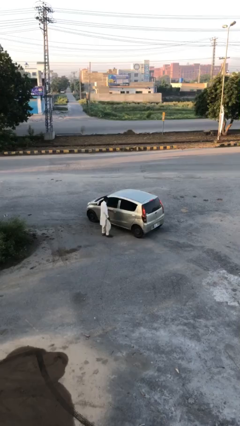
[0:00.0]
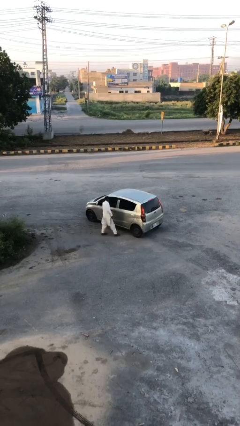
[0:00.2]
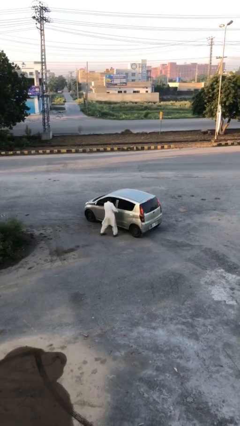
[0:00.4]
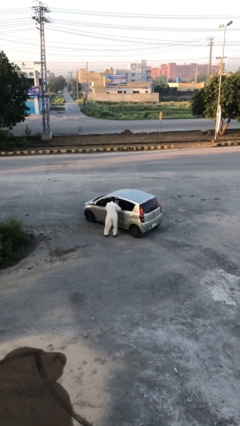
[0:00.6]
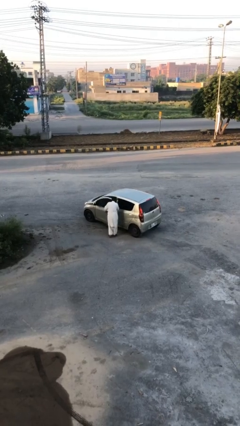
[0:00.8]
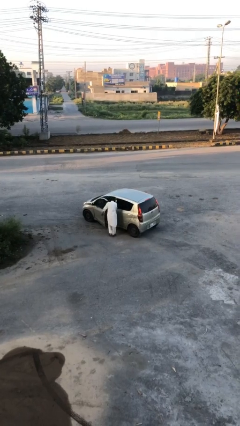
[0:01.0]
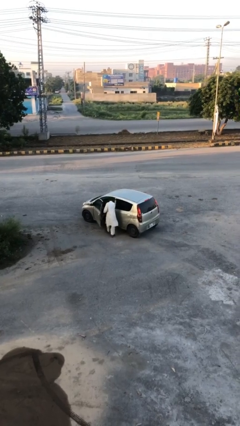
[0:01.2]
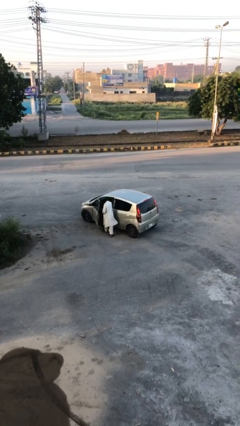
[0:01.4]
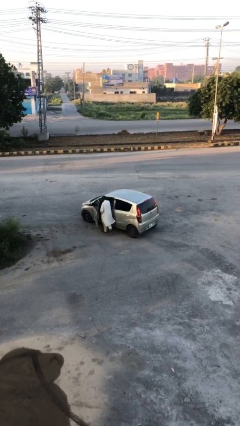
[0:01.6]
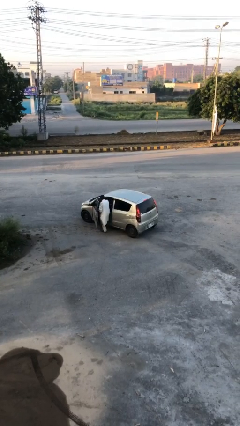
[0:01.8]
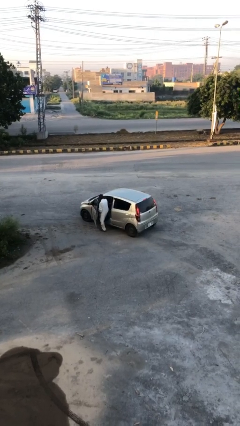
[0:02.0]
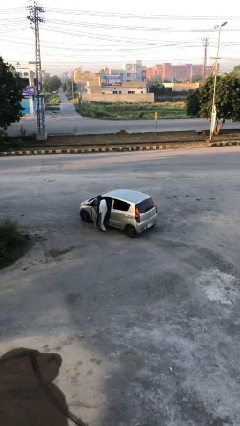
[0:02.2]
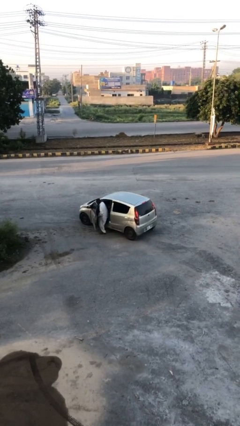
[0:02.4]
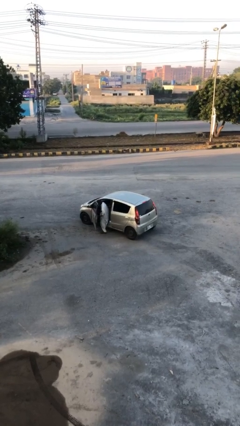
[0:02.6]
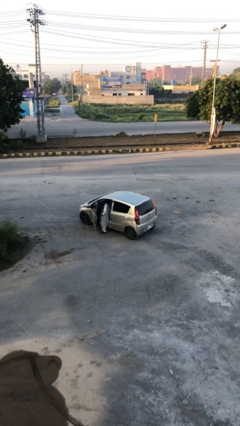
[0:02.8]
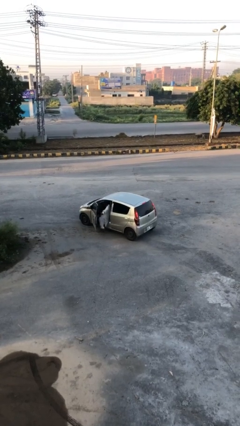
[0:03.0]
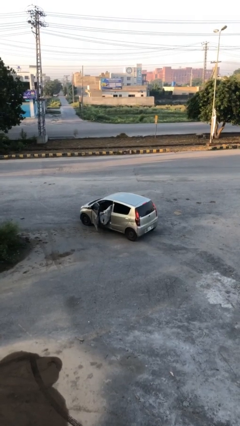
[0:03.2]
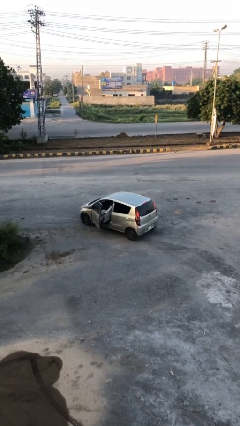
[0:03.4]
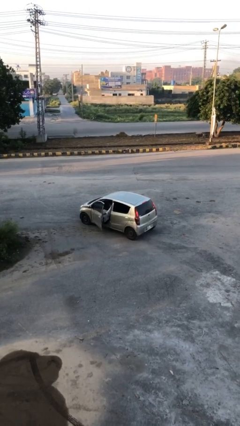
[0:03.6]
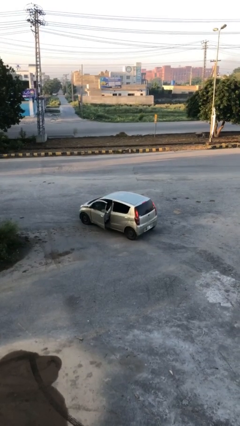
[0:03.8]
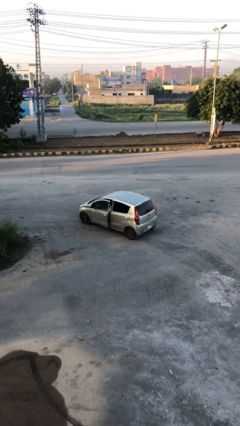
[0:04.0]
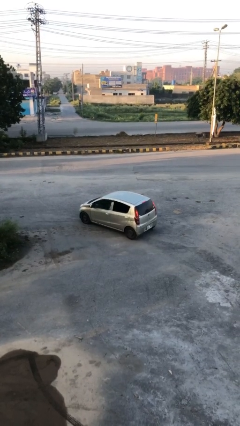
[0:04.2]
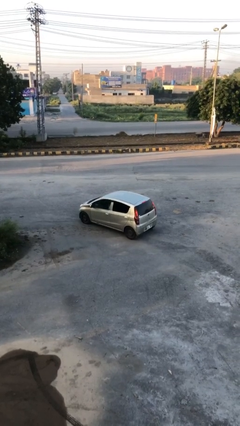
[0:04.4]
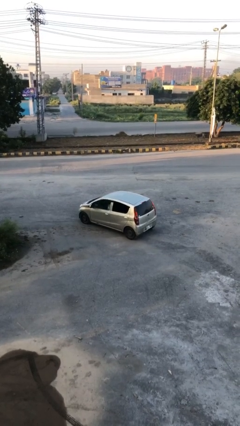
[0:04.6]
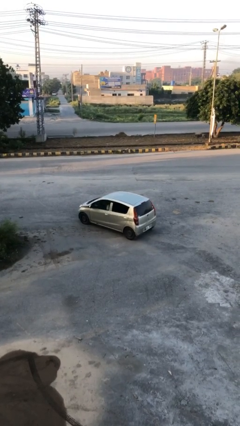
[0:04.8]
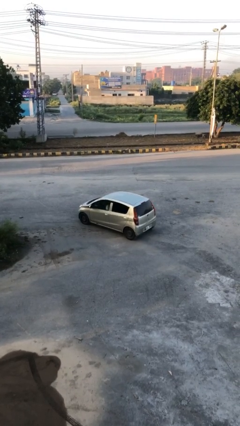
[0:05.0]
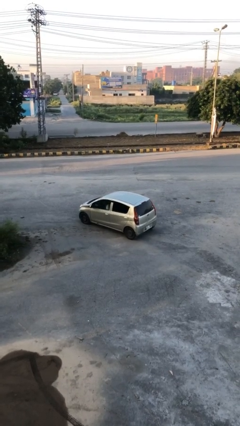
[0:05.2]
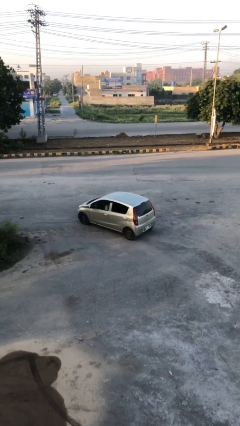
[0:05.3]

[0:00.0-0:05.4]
car picks up person

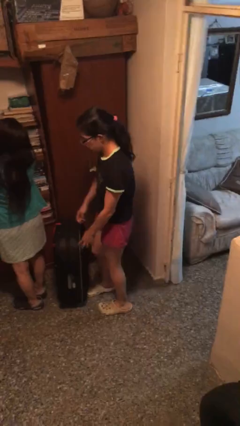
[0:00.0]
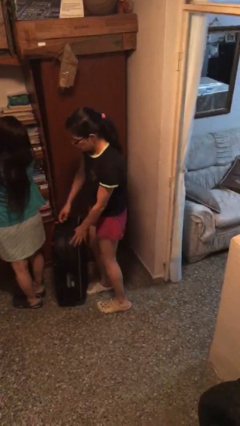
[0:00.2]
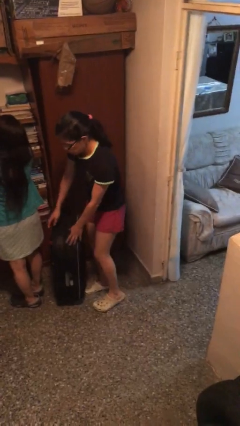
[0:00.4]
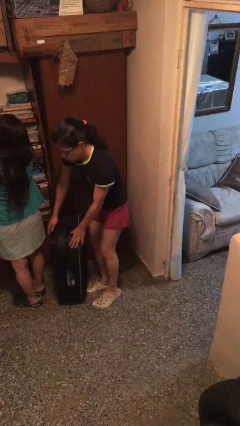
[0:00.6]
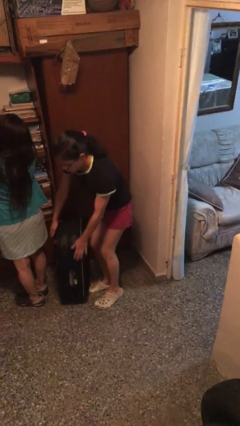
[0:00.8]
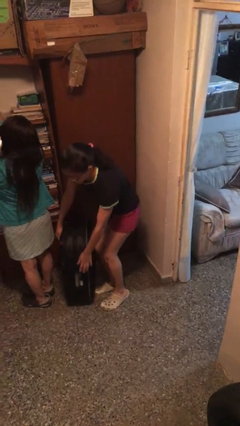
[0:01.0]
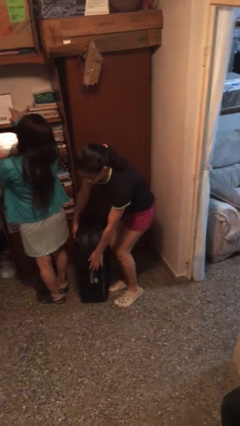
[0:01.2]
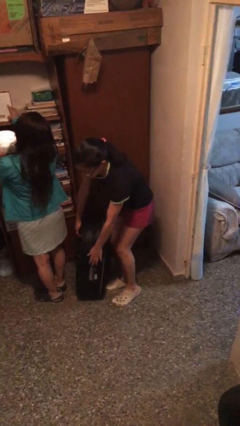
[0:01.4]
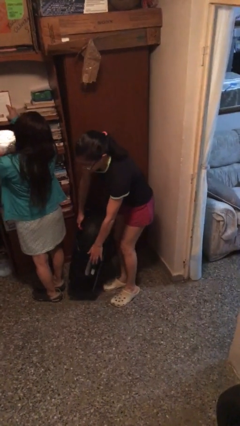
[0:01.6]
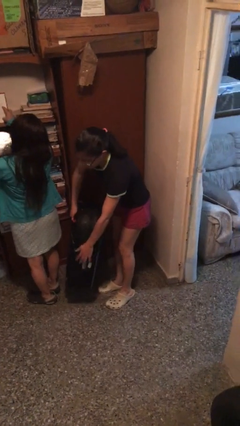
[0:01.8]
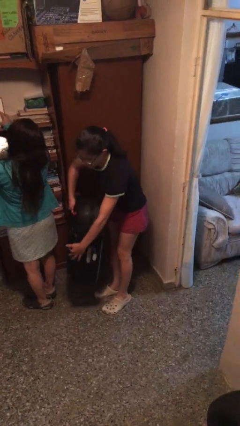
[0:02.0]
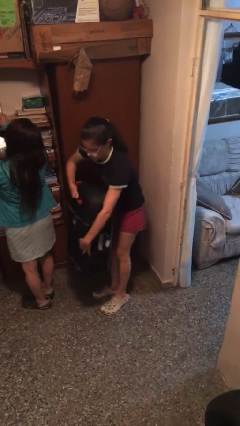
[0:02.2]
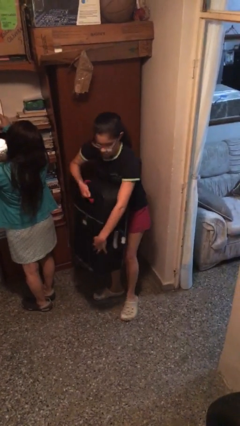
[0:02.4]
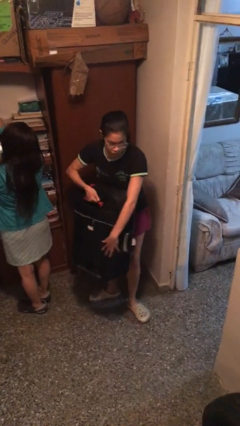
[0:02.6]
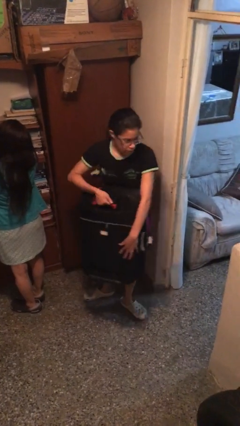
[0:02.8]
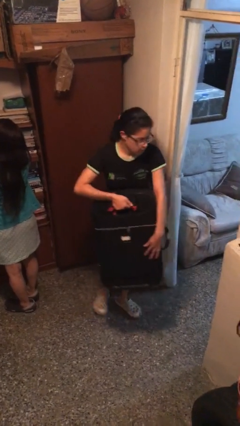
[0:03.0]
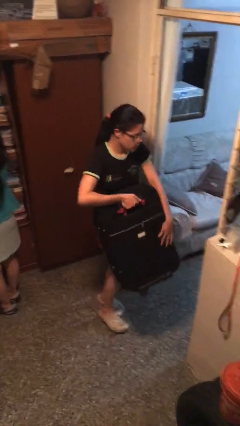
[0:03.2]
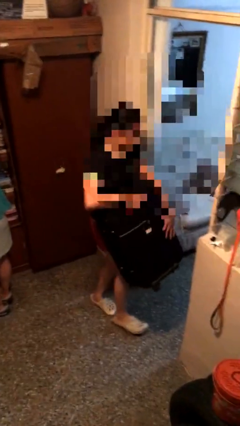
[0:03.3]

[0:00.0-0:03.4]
person steals object from person

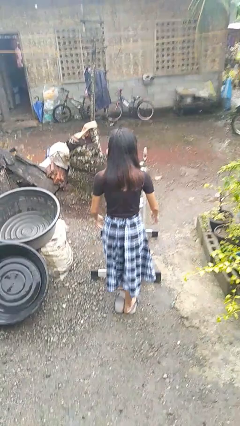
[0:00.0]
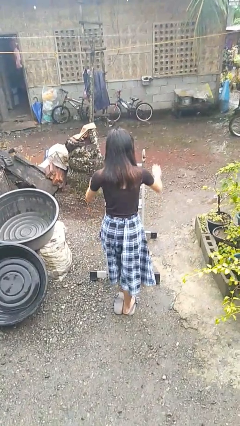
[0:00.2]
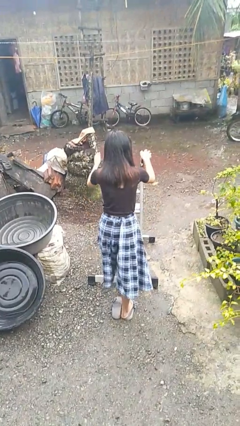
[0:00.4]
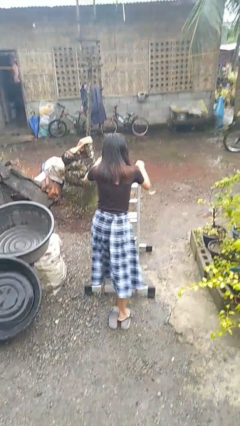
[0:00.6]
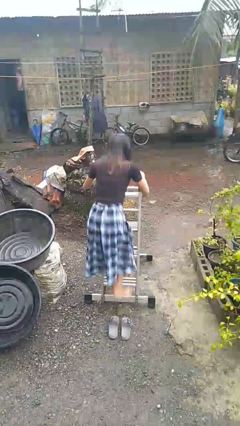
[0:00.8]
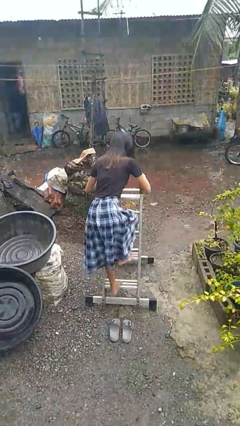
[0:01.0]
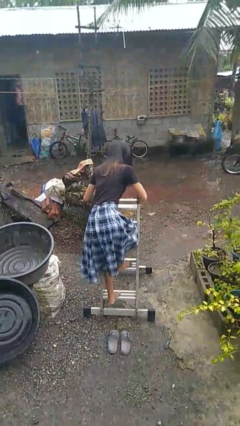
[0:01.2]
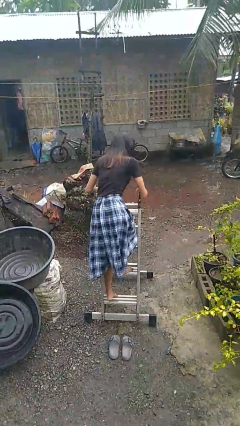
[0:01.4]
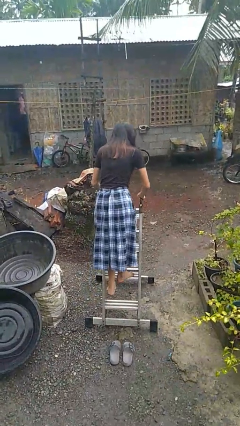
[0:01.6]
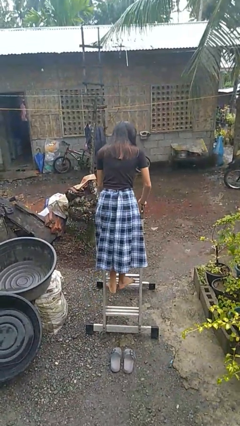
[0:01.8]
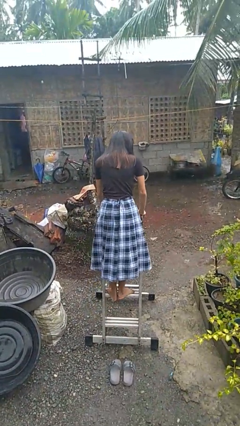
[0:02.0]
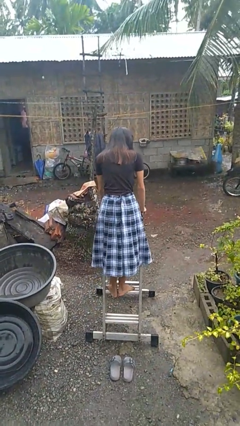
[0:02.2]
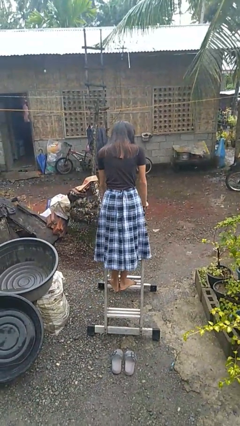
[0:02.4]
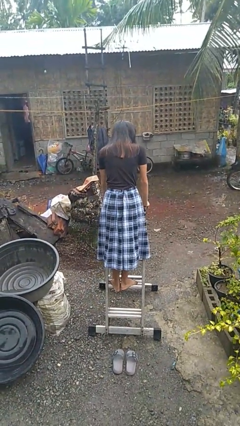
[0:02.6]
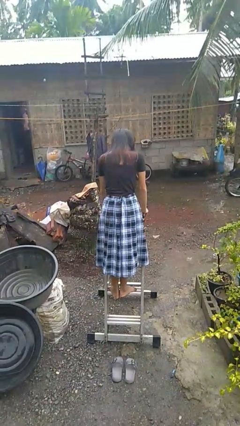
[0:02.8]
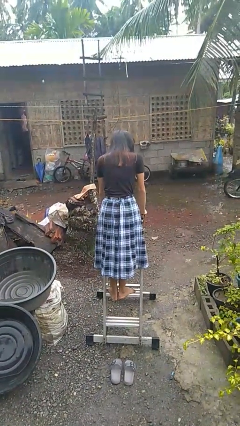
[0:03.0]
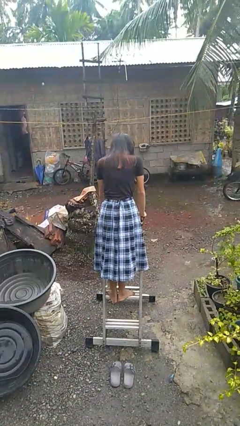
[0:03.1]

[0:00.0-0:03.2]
person climbs up ladder

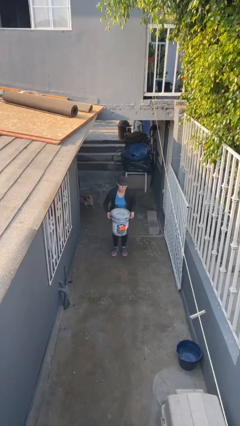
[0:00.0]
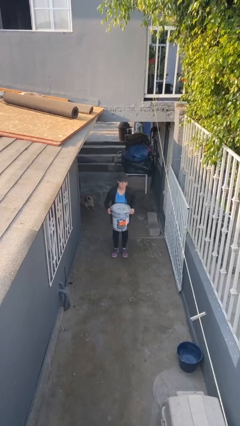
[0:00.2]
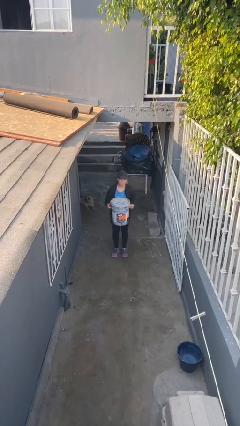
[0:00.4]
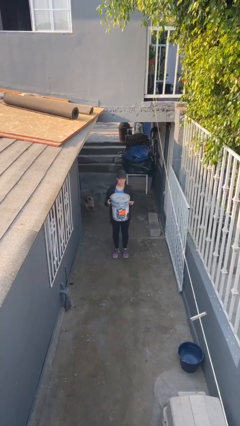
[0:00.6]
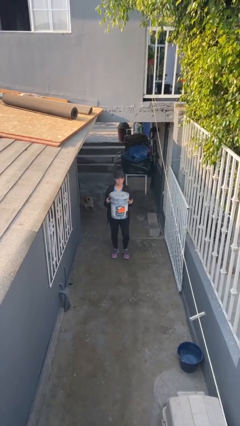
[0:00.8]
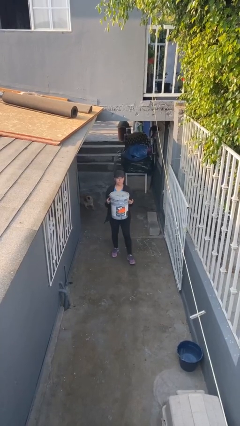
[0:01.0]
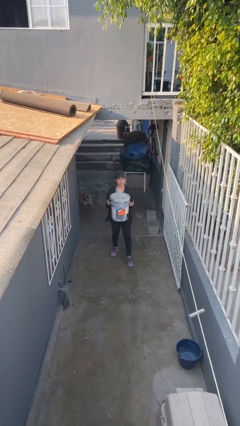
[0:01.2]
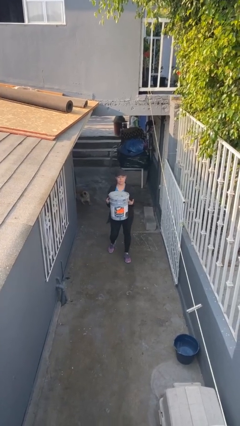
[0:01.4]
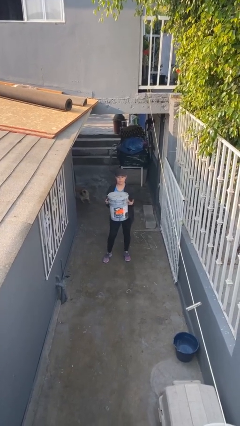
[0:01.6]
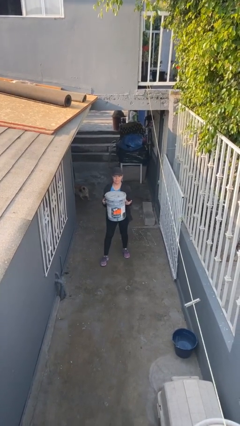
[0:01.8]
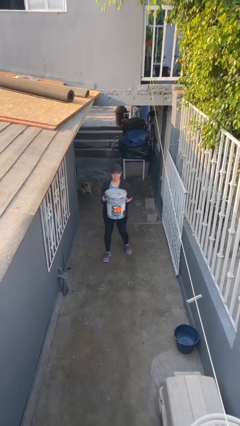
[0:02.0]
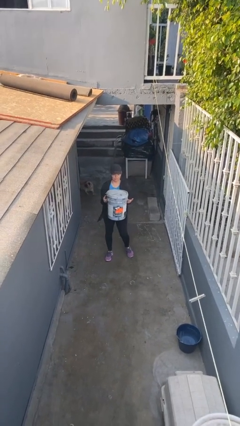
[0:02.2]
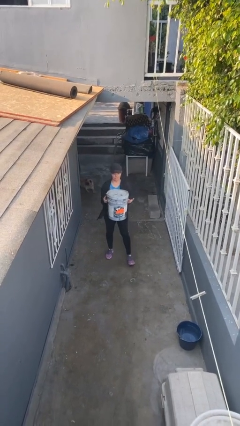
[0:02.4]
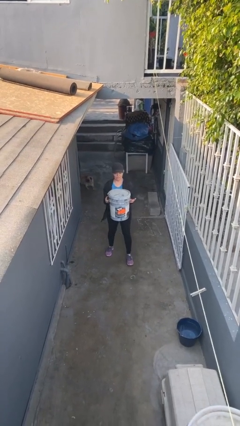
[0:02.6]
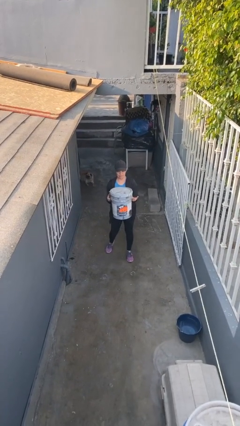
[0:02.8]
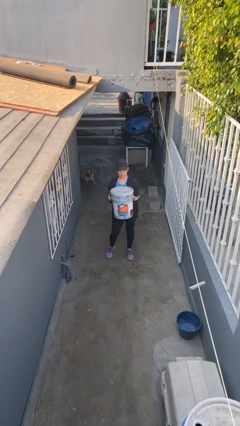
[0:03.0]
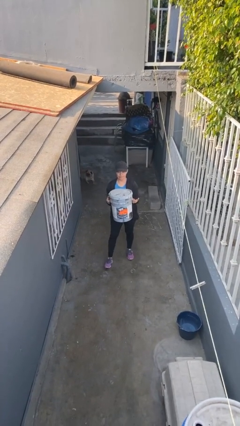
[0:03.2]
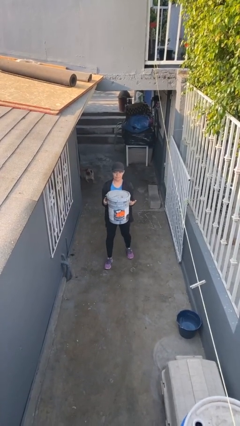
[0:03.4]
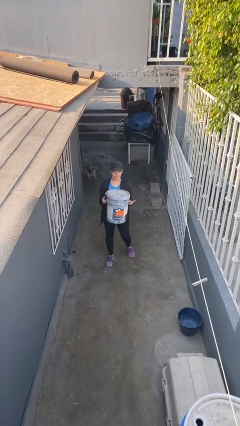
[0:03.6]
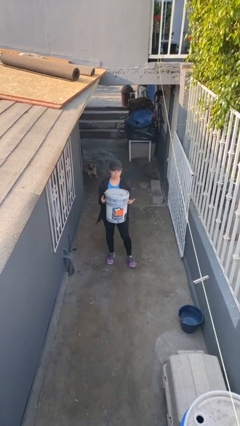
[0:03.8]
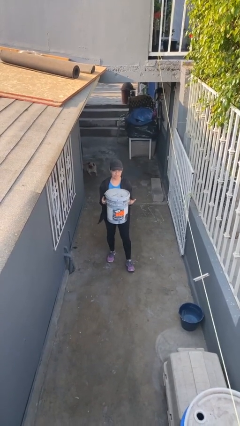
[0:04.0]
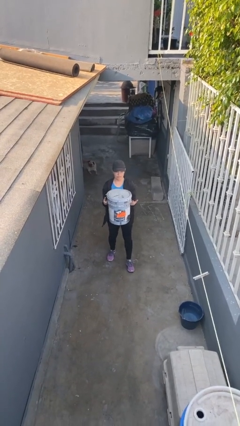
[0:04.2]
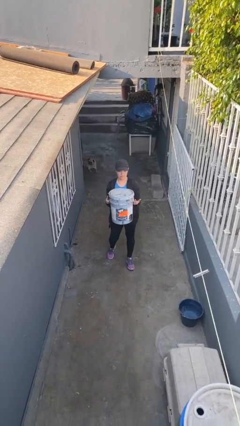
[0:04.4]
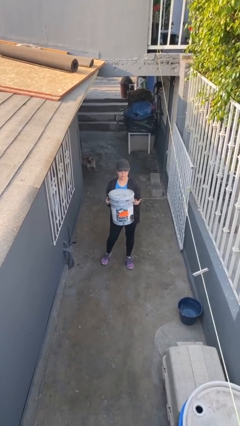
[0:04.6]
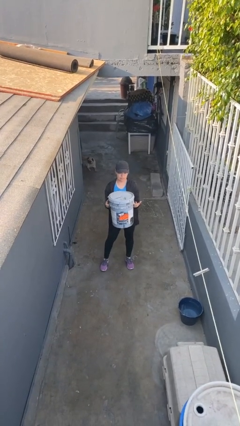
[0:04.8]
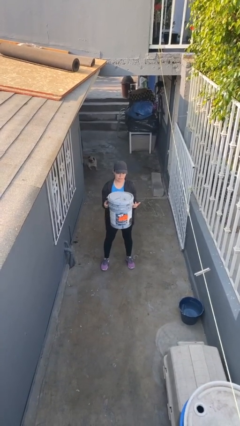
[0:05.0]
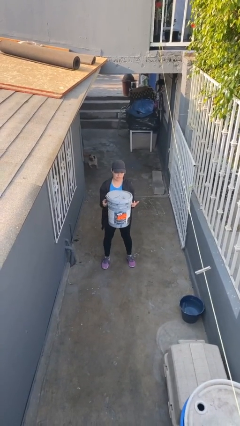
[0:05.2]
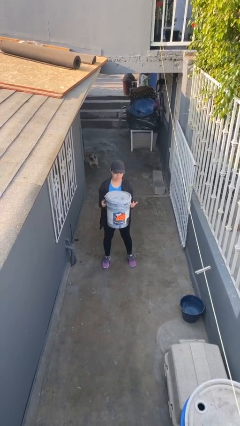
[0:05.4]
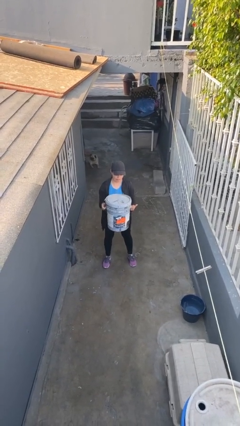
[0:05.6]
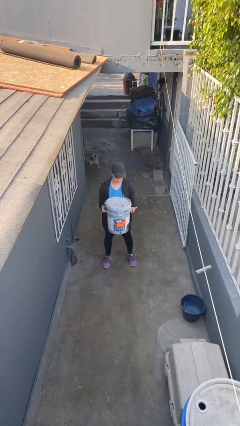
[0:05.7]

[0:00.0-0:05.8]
person carries heavy object
